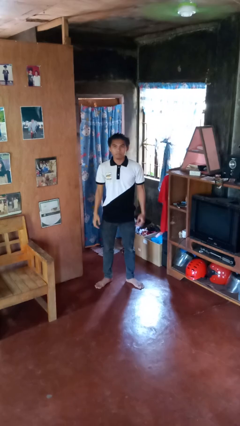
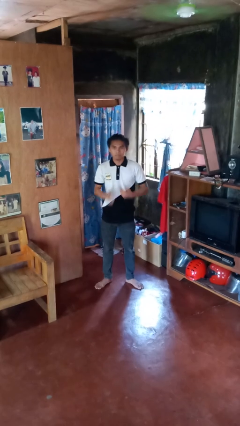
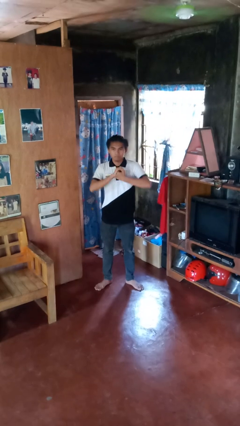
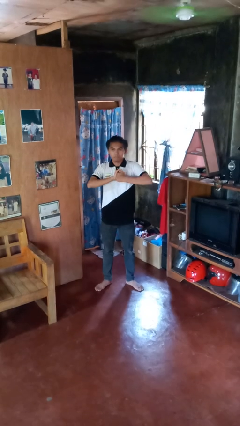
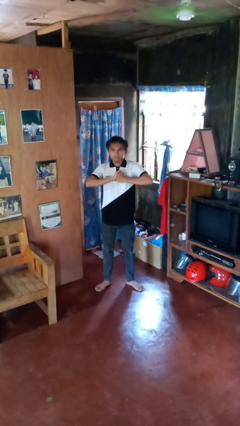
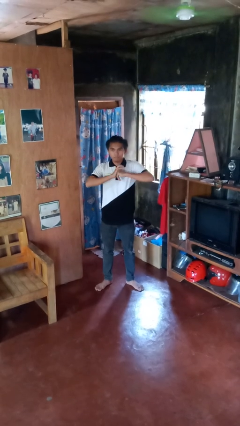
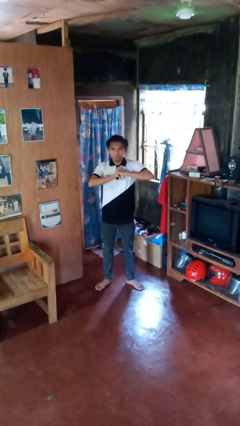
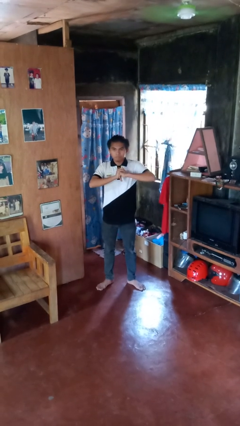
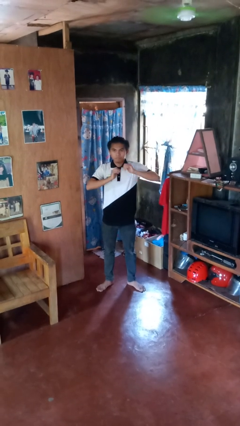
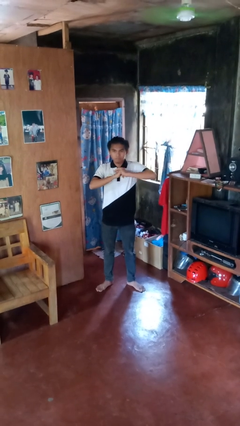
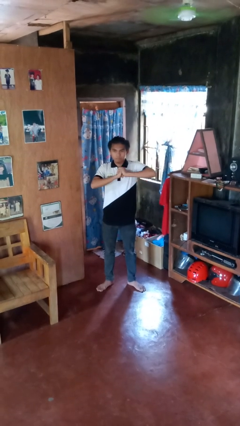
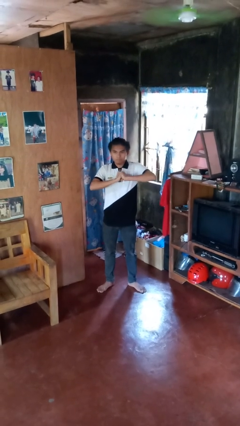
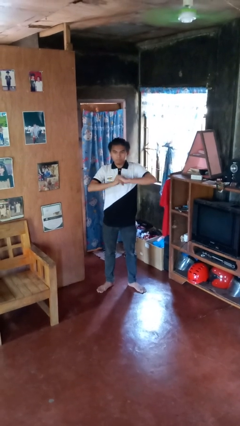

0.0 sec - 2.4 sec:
person cracks knuckles

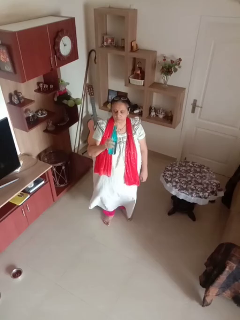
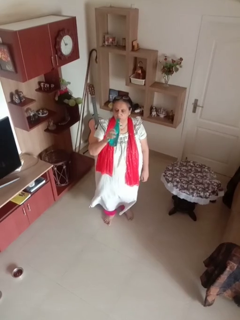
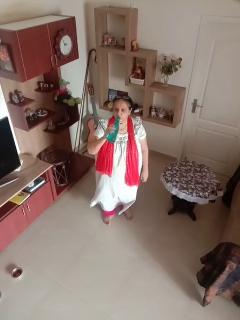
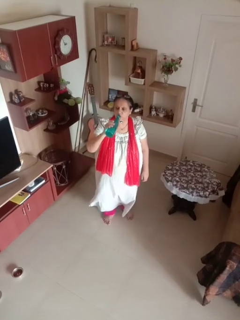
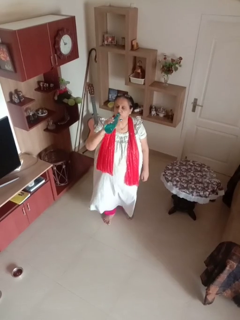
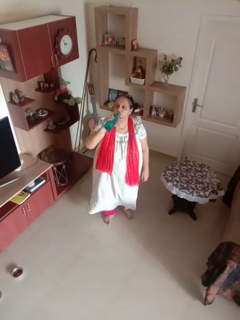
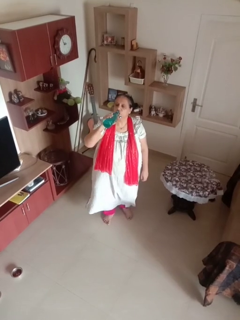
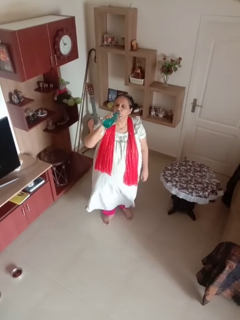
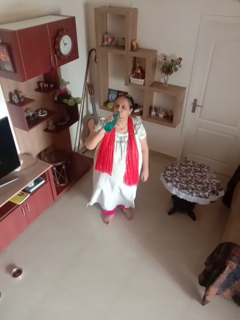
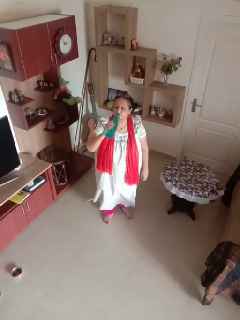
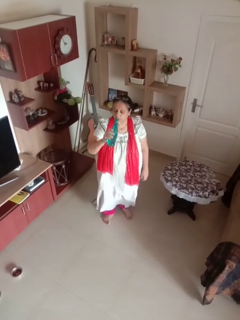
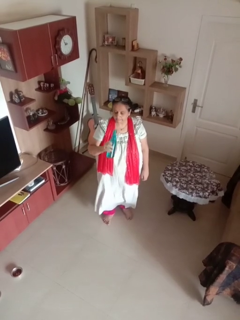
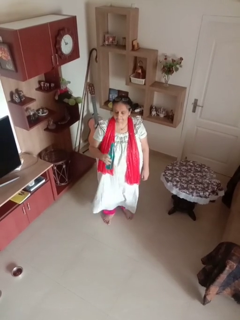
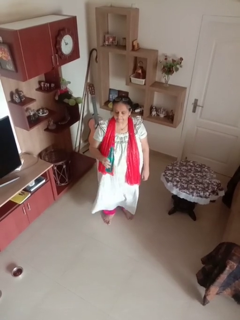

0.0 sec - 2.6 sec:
person drinks from bottle

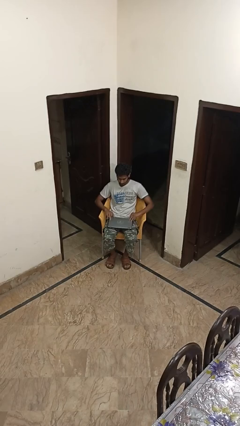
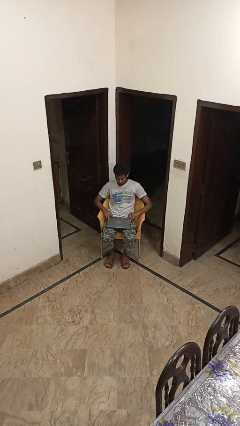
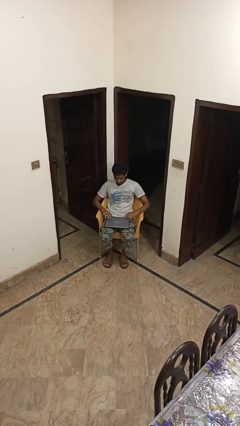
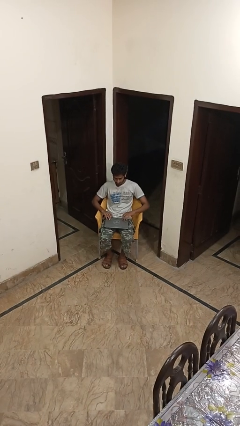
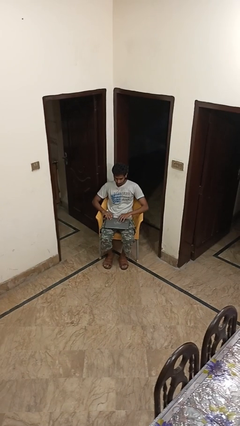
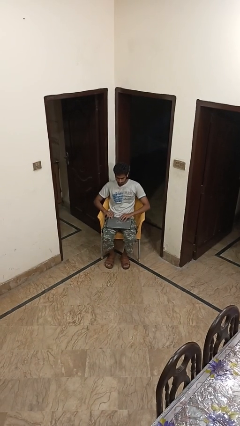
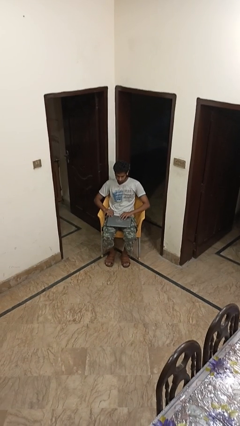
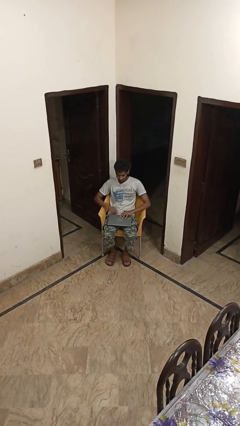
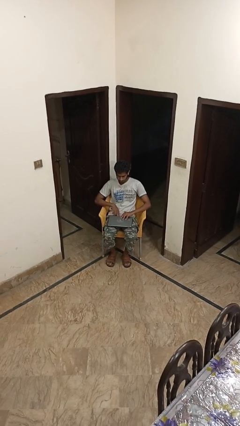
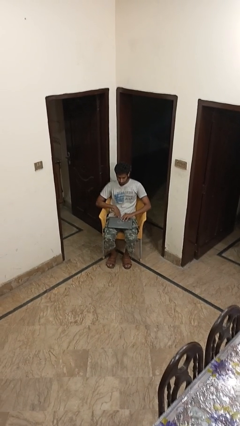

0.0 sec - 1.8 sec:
person closes laptop

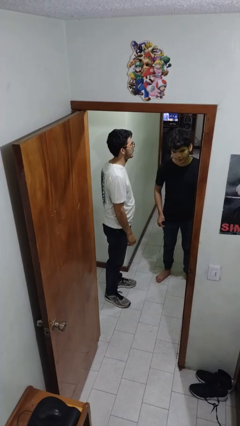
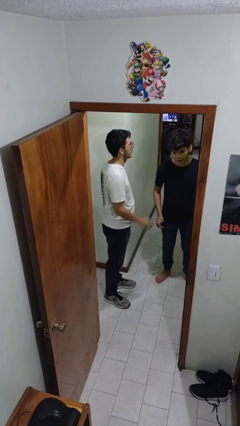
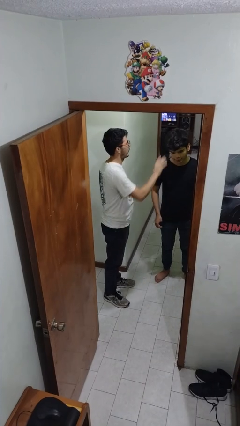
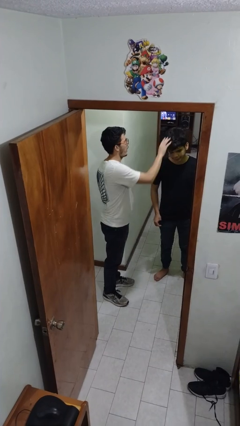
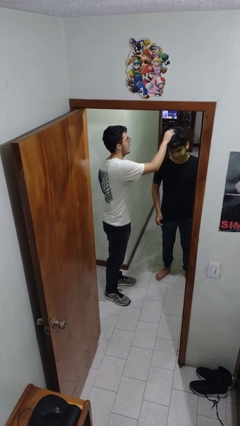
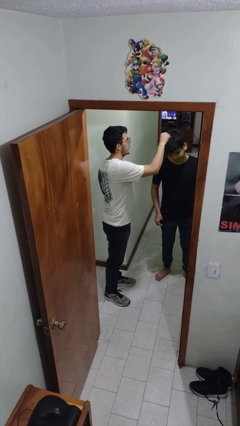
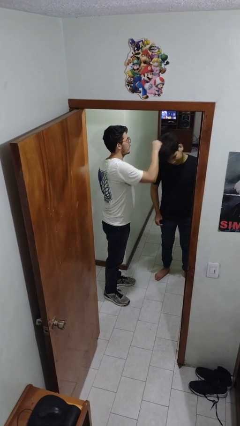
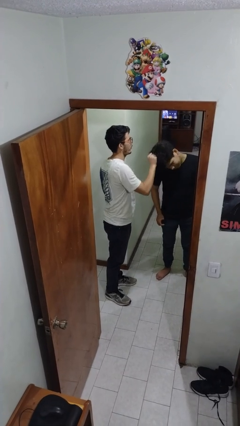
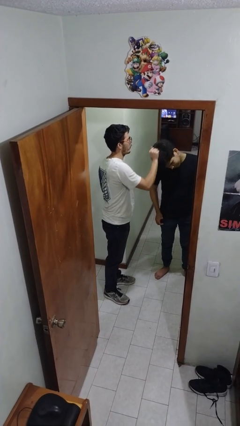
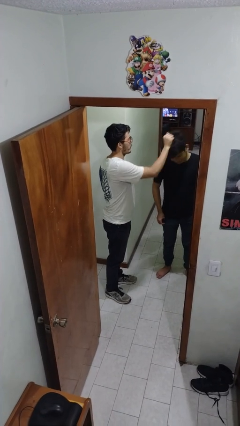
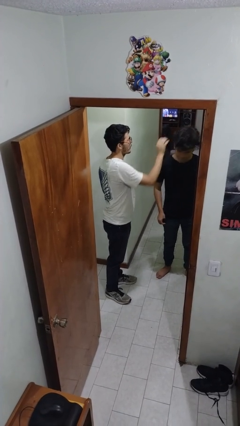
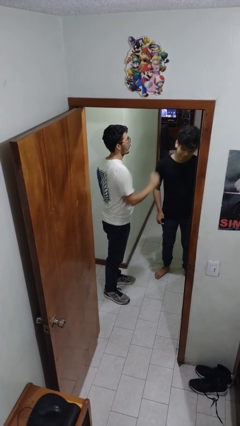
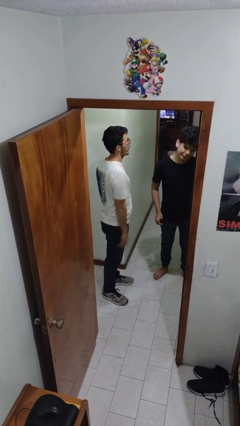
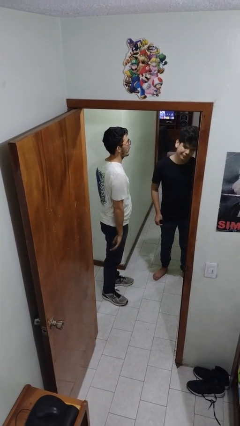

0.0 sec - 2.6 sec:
person grabs person by hair

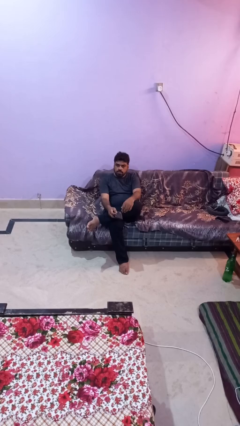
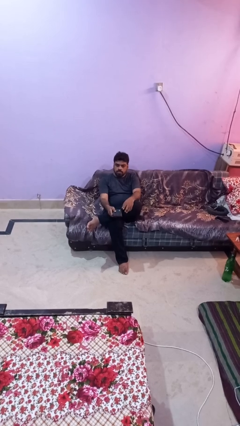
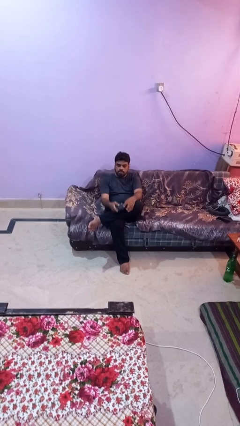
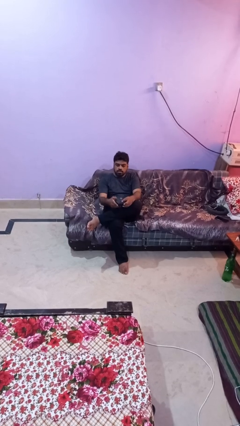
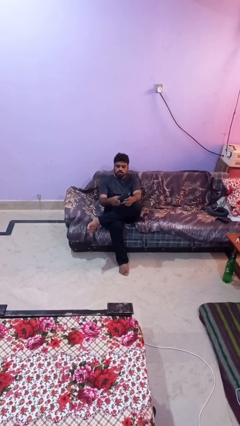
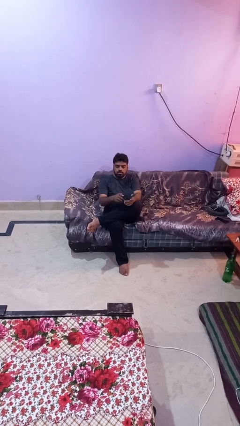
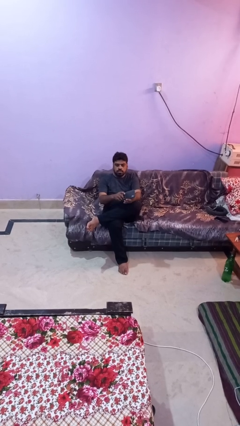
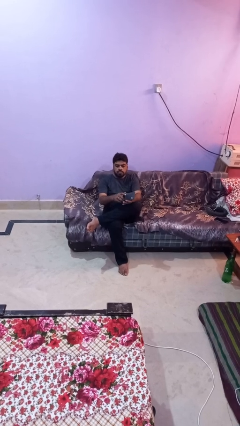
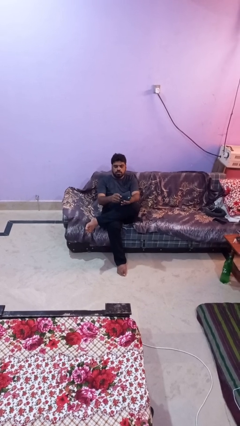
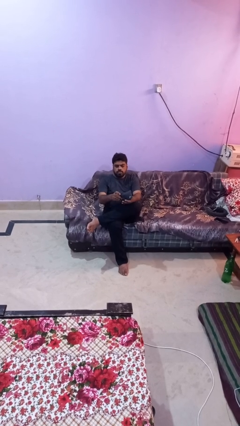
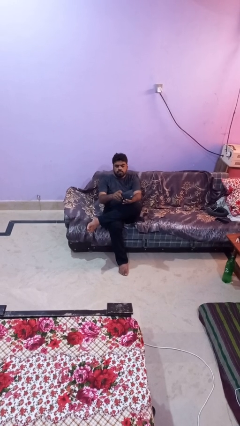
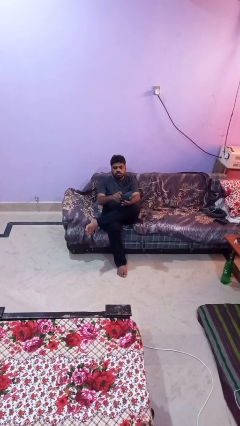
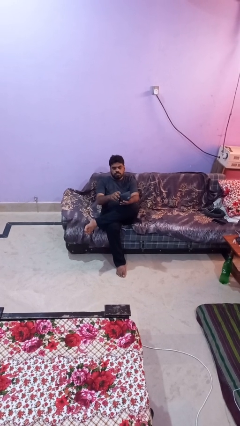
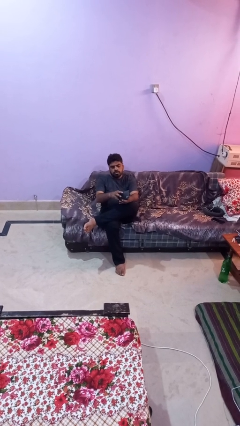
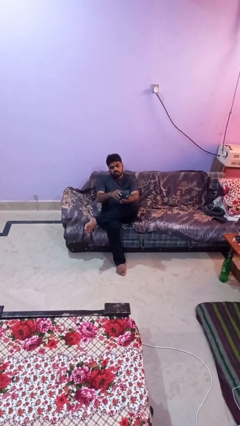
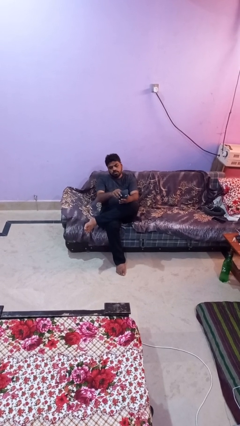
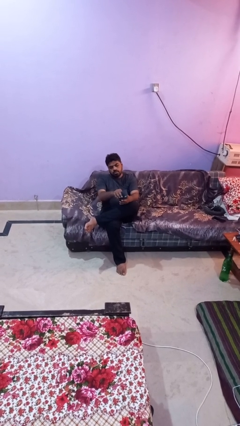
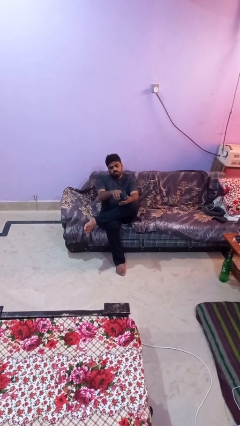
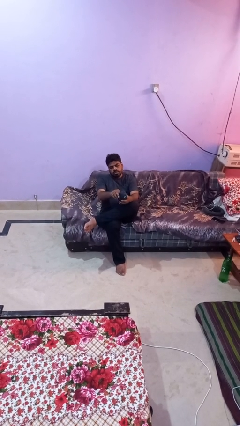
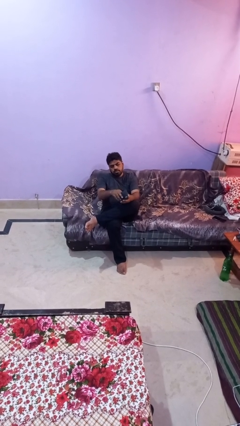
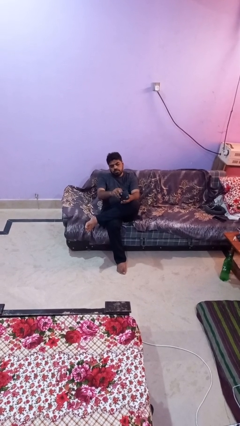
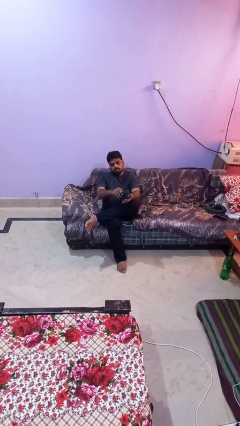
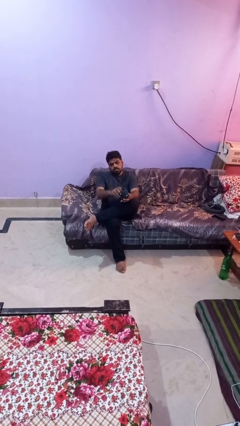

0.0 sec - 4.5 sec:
person searches in purse

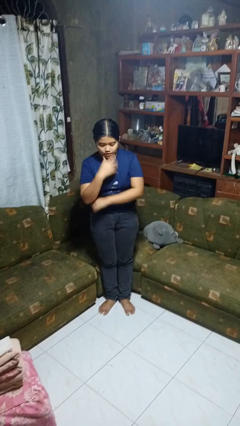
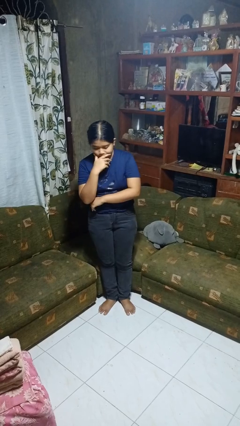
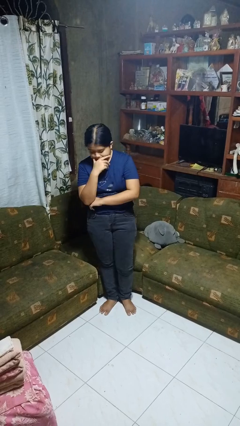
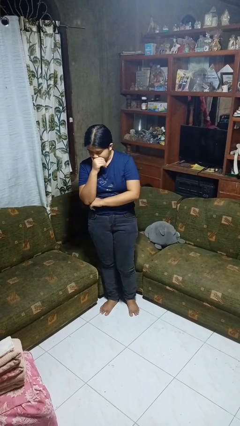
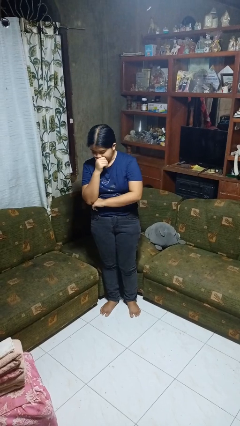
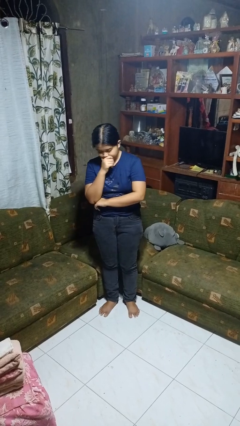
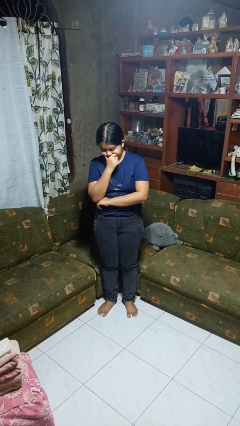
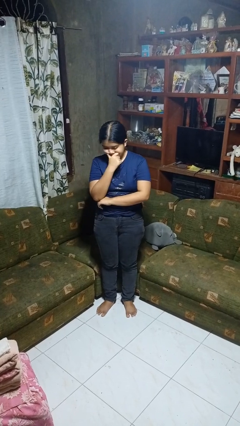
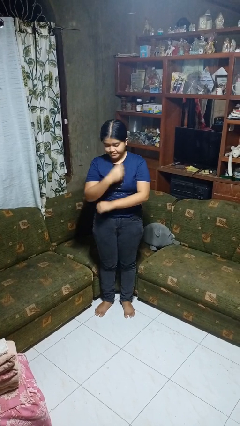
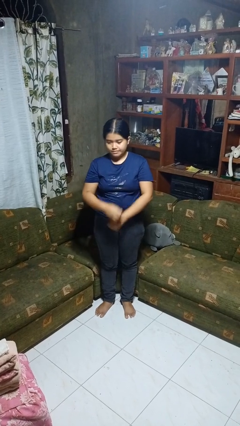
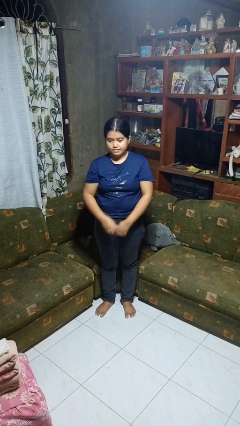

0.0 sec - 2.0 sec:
person strokes chin

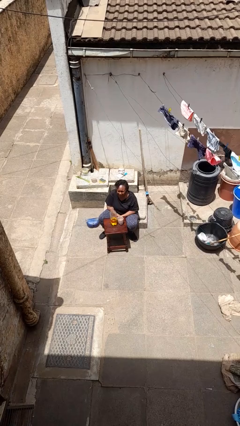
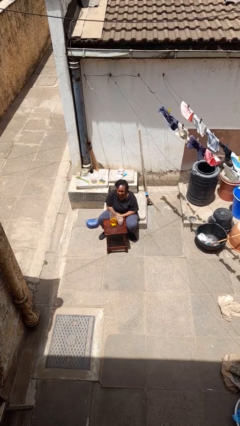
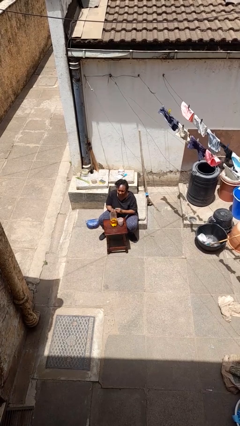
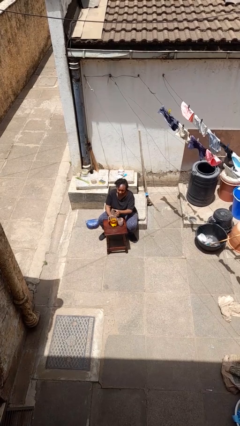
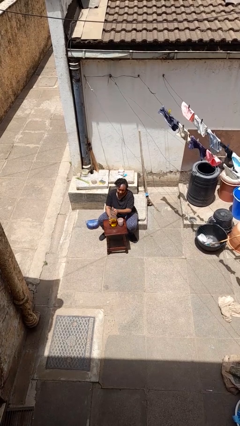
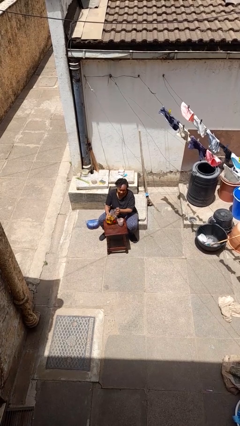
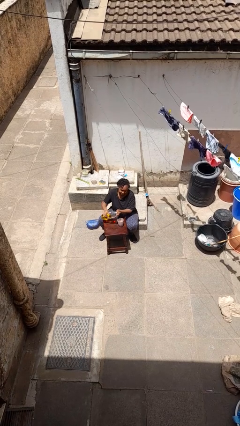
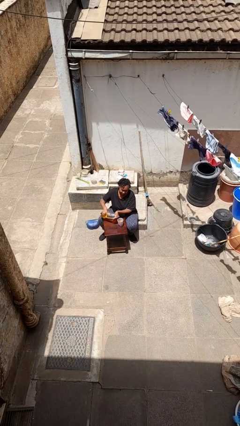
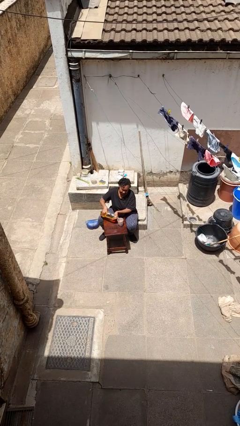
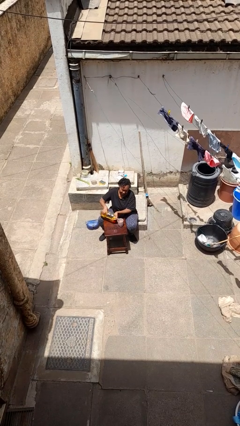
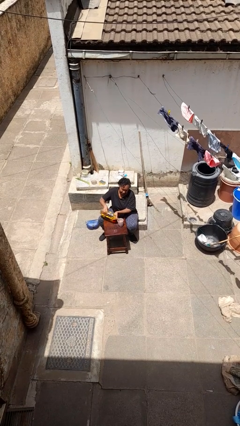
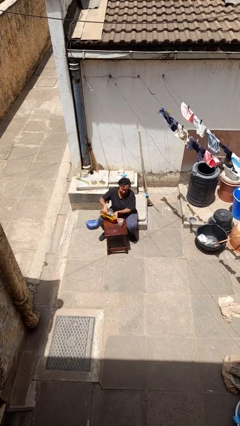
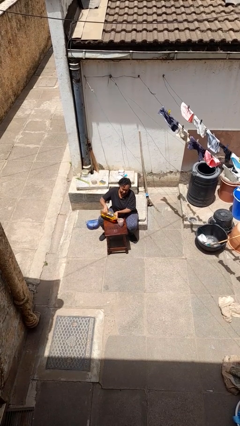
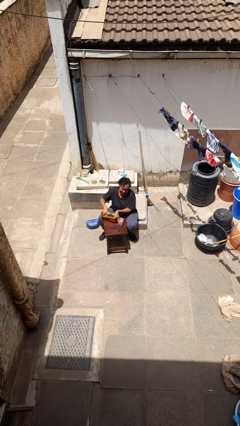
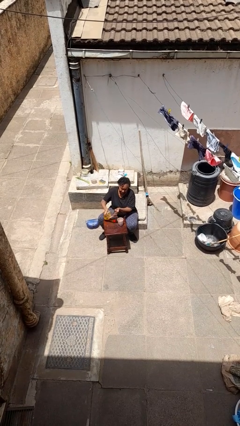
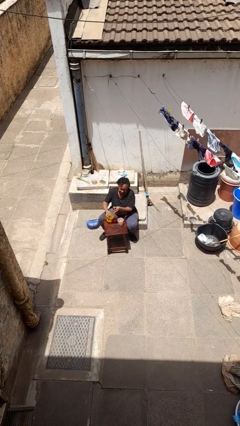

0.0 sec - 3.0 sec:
person pours liquid into cup
